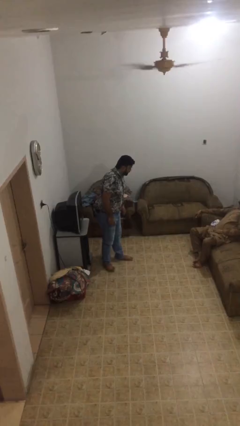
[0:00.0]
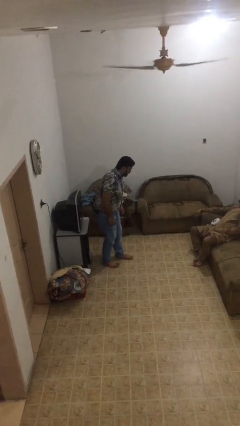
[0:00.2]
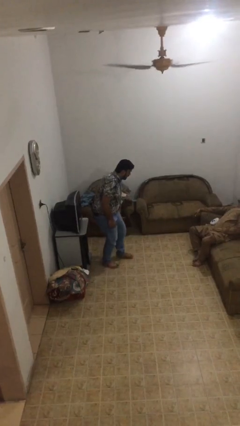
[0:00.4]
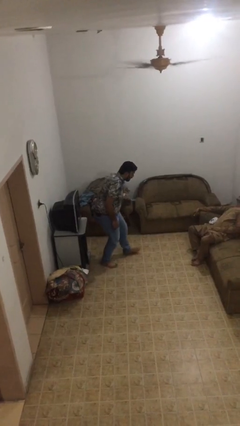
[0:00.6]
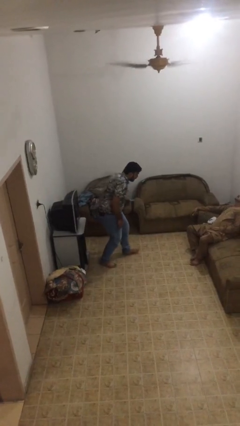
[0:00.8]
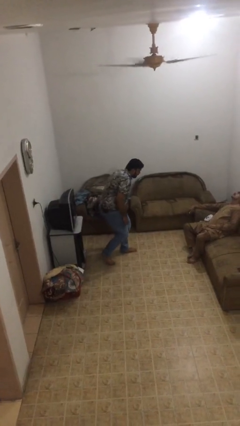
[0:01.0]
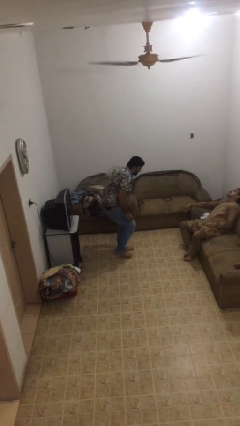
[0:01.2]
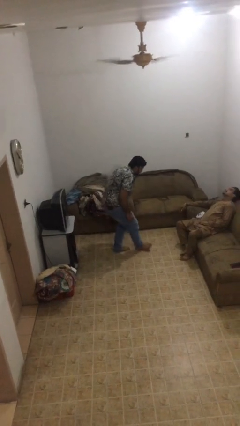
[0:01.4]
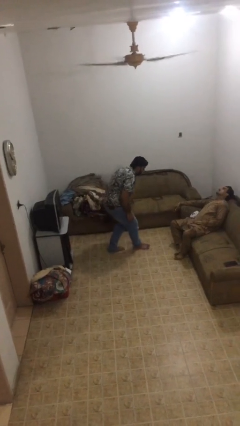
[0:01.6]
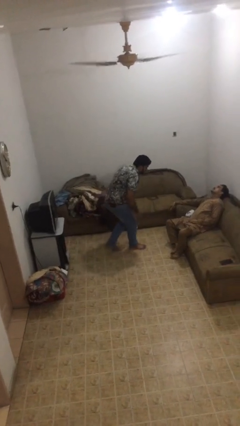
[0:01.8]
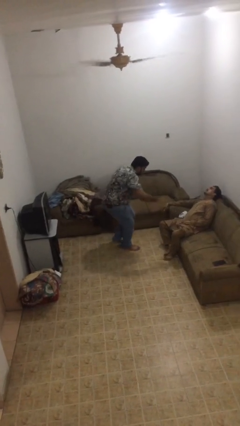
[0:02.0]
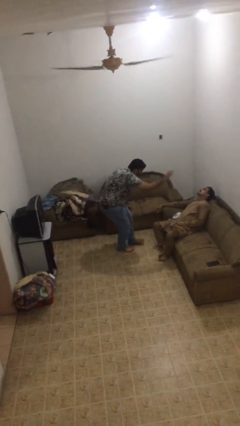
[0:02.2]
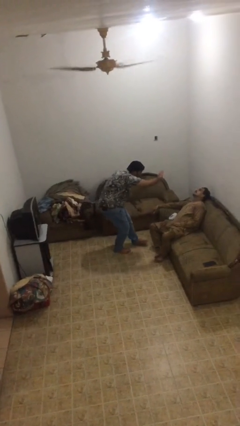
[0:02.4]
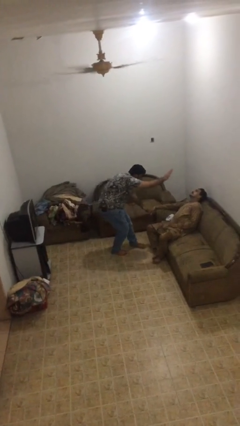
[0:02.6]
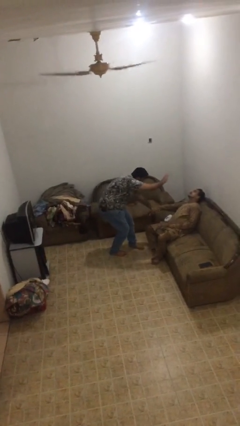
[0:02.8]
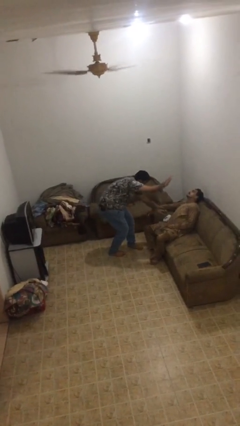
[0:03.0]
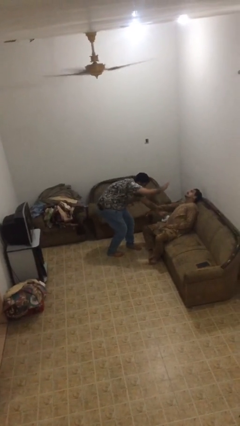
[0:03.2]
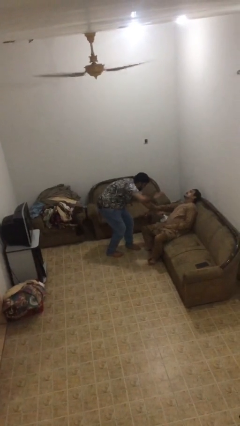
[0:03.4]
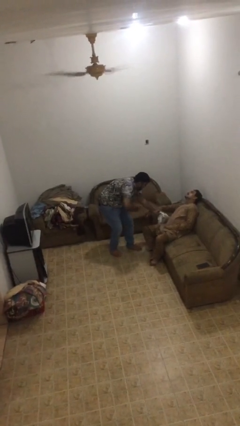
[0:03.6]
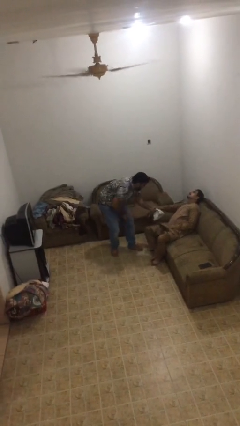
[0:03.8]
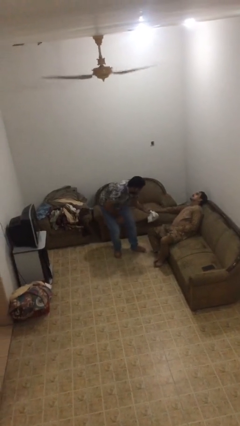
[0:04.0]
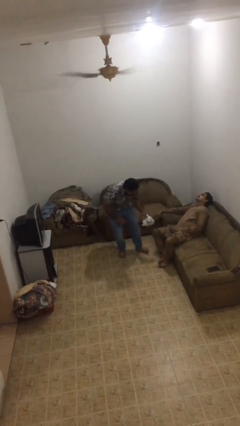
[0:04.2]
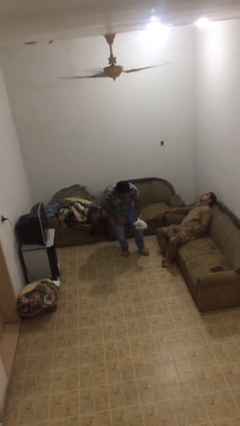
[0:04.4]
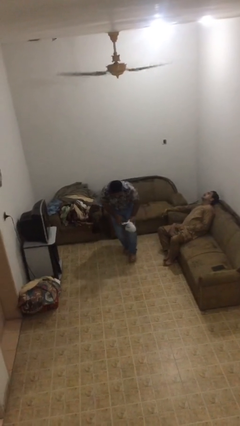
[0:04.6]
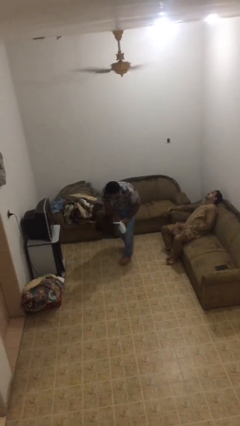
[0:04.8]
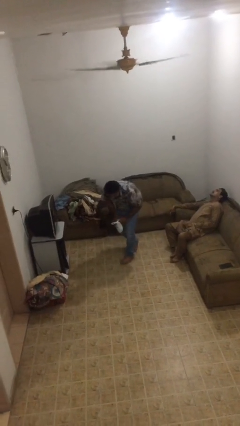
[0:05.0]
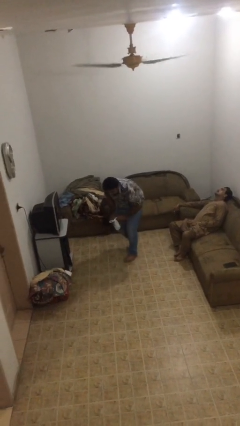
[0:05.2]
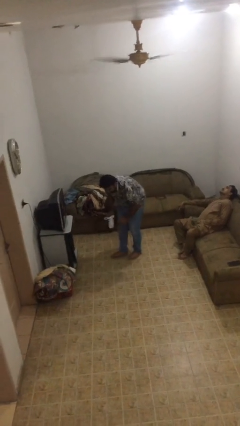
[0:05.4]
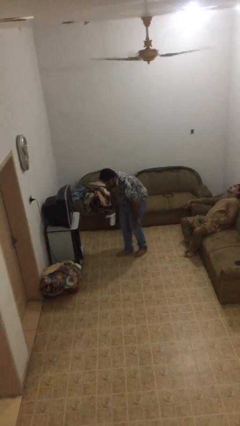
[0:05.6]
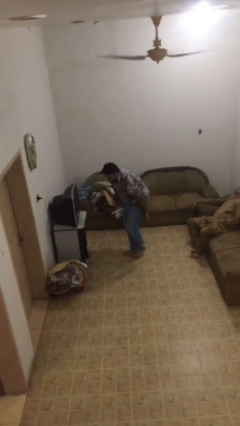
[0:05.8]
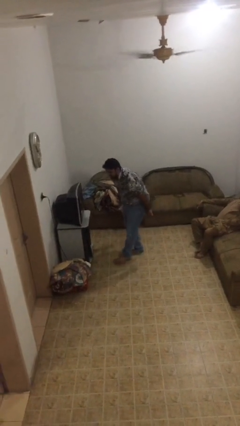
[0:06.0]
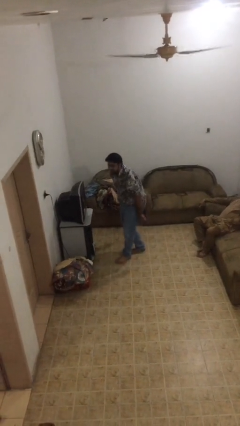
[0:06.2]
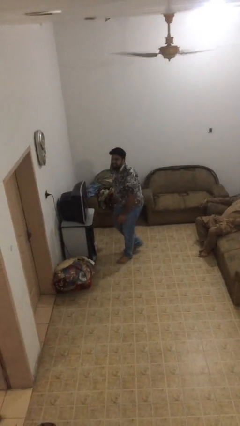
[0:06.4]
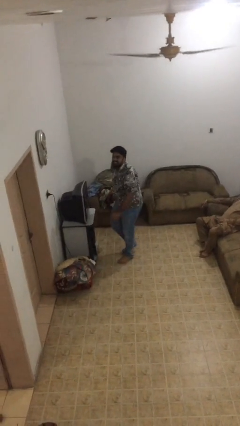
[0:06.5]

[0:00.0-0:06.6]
person steals object from person

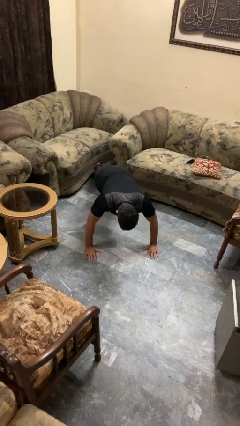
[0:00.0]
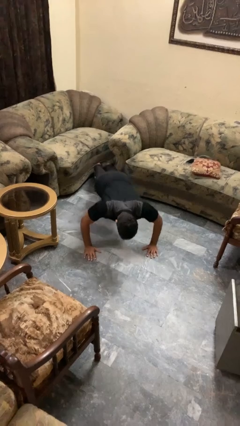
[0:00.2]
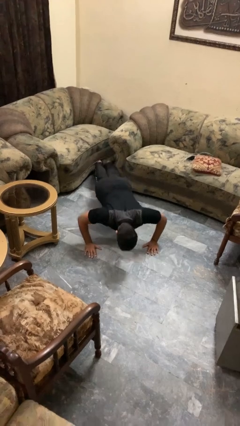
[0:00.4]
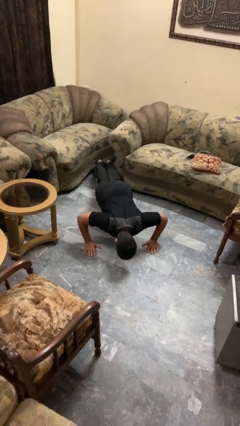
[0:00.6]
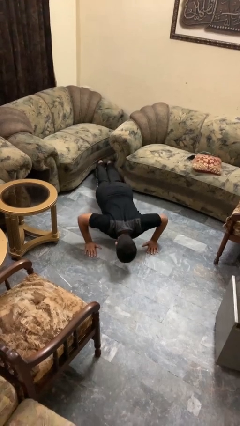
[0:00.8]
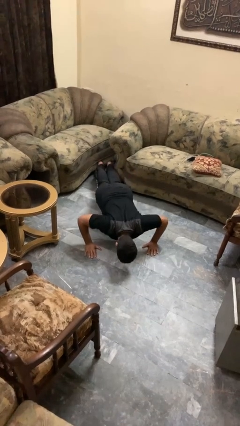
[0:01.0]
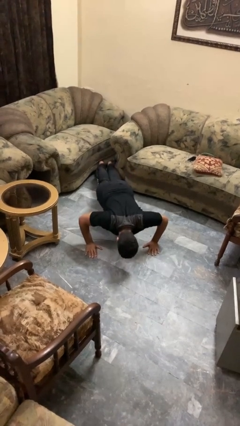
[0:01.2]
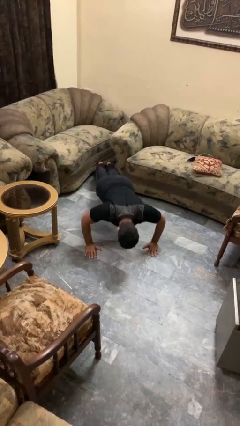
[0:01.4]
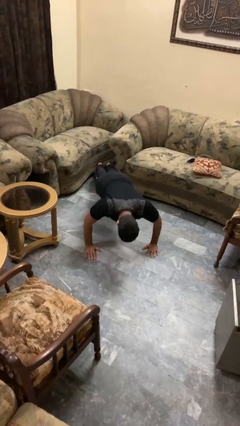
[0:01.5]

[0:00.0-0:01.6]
person exercises with pushup

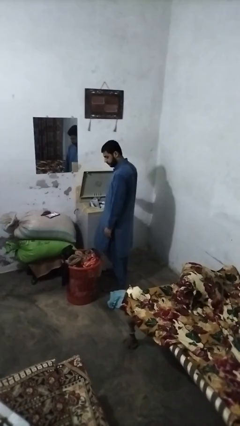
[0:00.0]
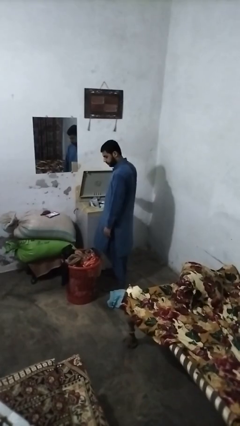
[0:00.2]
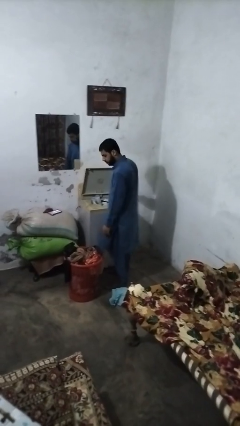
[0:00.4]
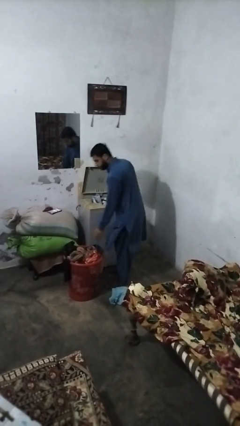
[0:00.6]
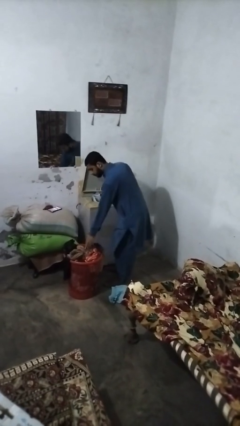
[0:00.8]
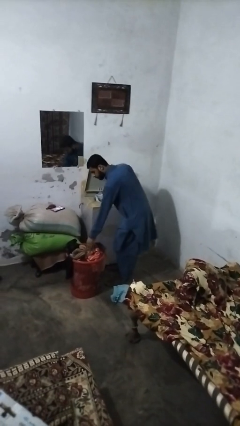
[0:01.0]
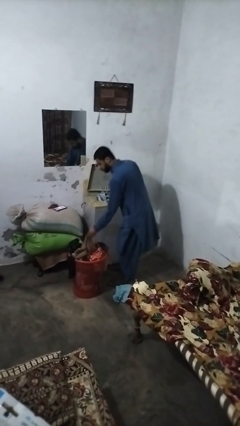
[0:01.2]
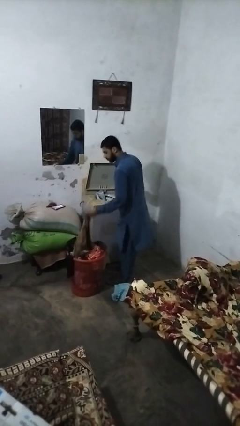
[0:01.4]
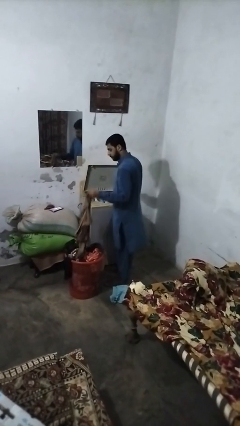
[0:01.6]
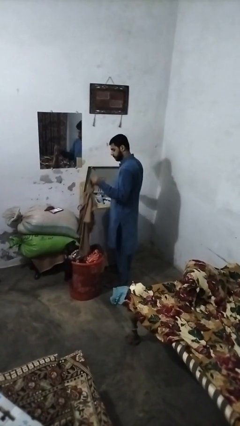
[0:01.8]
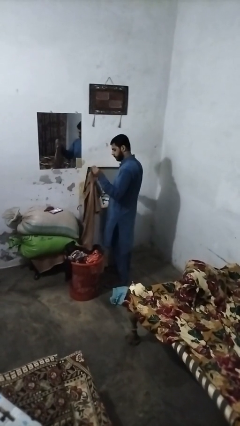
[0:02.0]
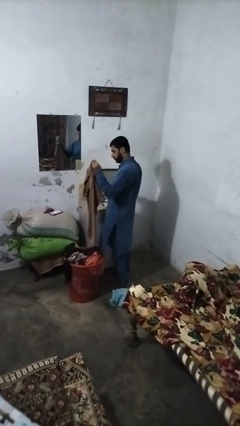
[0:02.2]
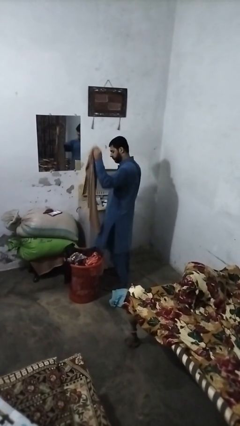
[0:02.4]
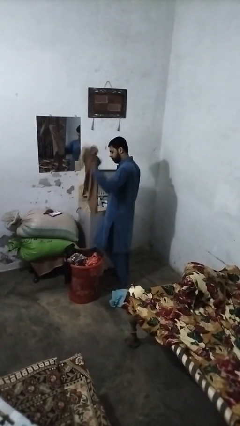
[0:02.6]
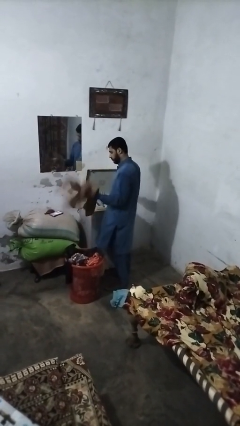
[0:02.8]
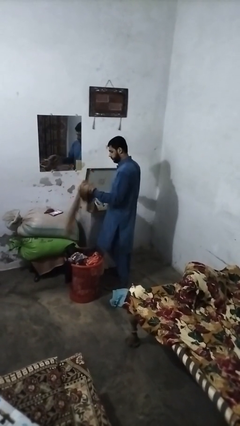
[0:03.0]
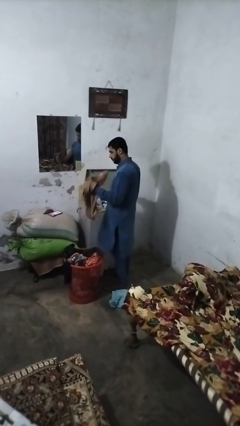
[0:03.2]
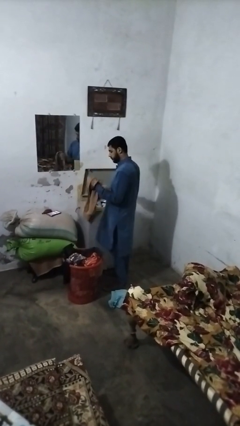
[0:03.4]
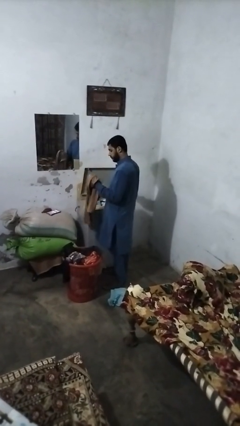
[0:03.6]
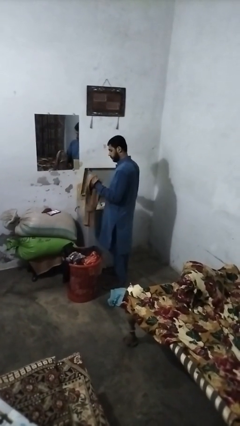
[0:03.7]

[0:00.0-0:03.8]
person unloads clotheswasher

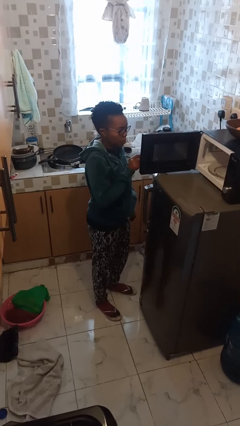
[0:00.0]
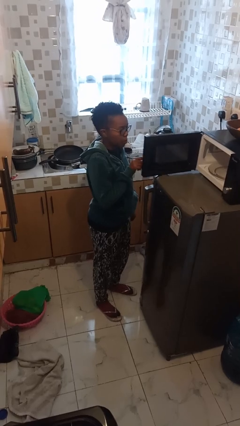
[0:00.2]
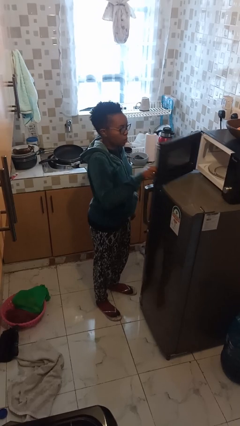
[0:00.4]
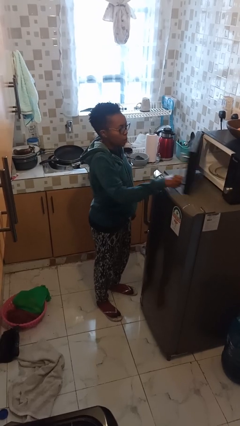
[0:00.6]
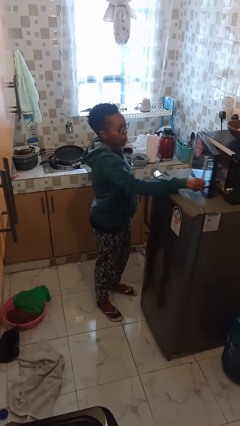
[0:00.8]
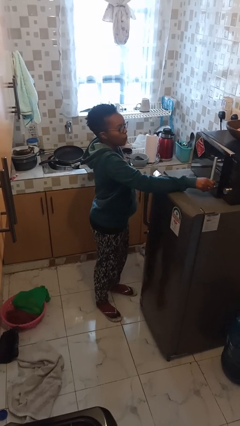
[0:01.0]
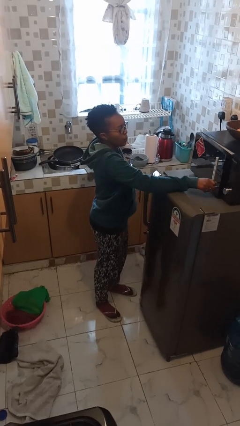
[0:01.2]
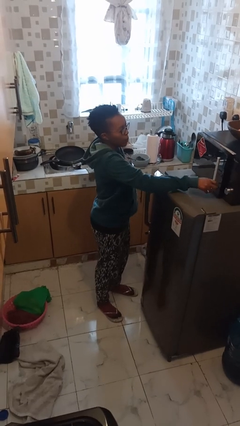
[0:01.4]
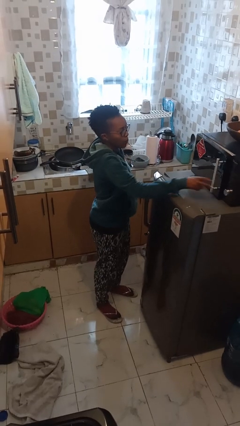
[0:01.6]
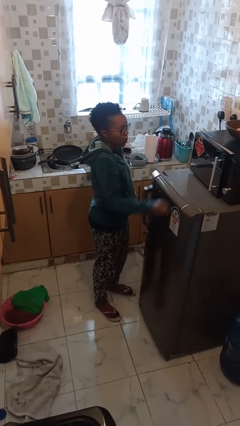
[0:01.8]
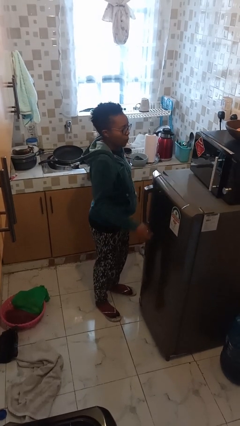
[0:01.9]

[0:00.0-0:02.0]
person closes microwave

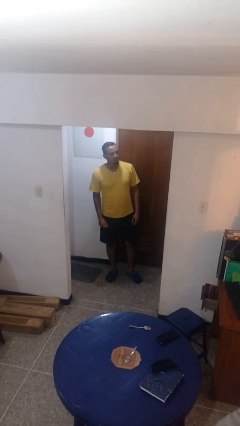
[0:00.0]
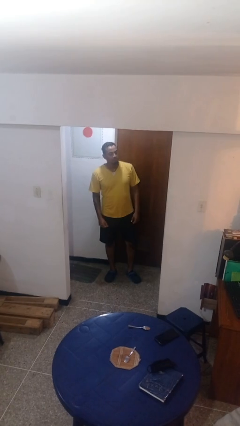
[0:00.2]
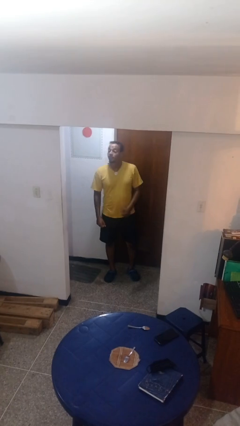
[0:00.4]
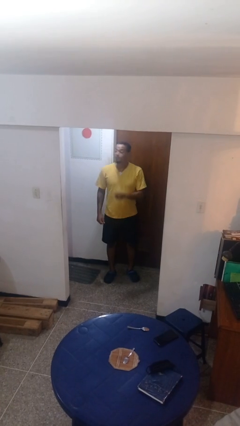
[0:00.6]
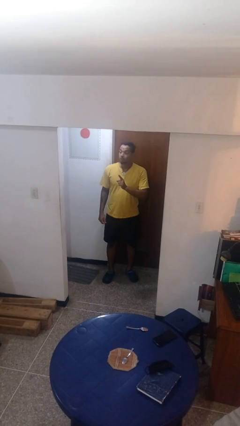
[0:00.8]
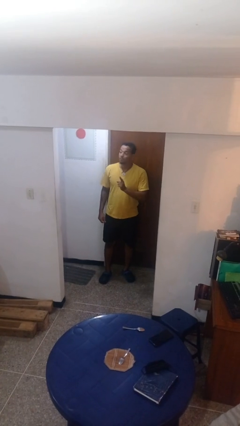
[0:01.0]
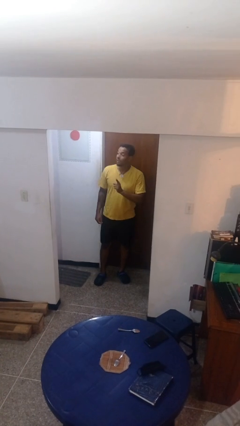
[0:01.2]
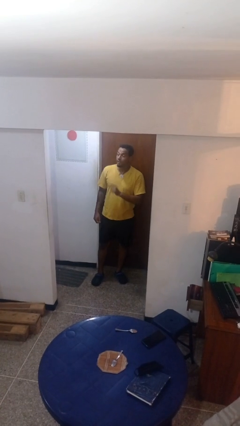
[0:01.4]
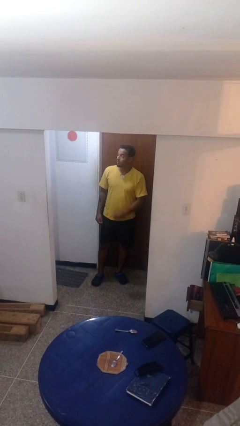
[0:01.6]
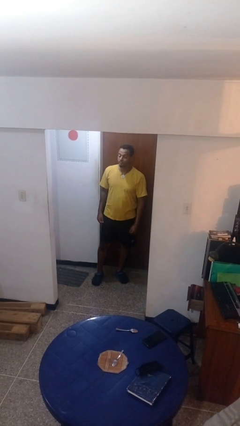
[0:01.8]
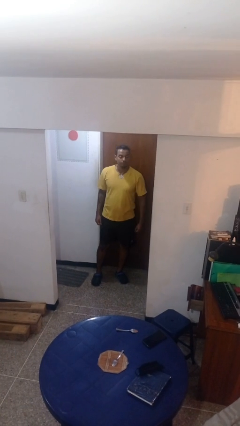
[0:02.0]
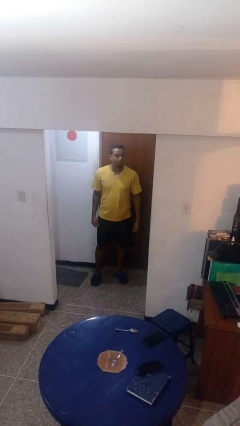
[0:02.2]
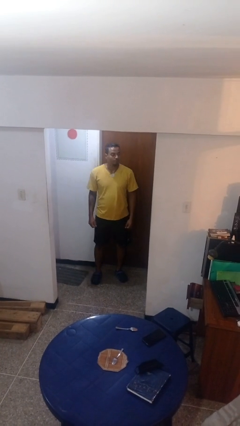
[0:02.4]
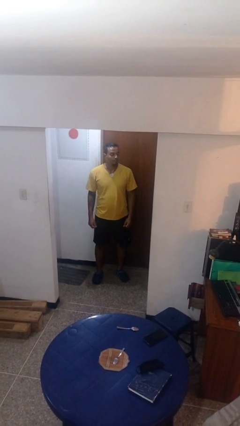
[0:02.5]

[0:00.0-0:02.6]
person shakes head

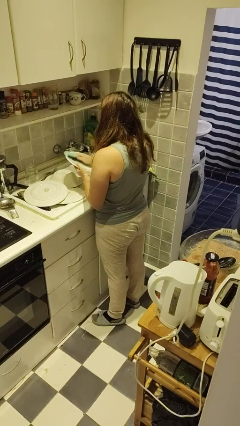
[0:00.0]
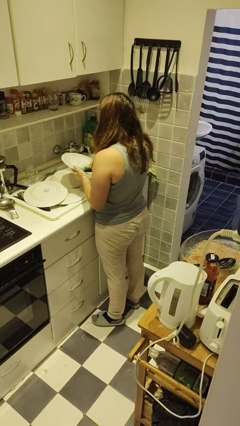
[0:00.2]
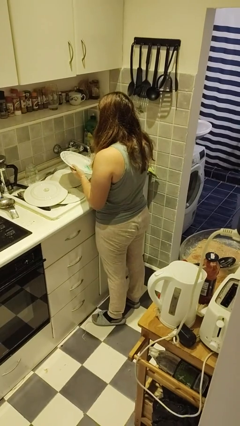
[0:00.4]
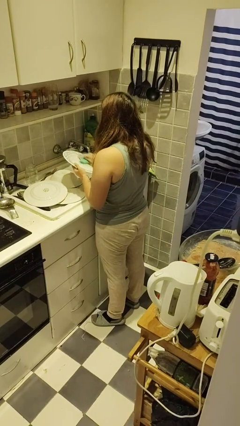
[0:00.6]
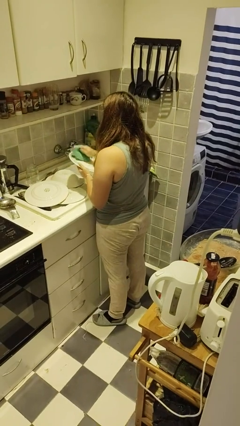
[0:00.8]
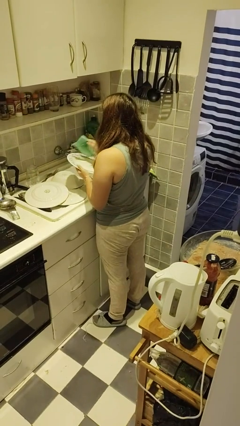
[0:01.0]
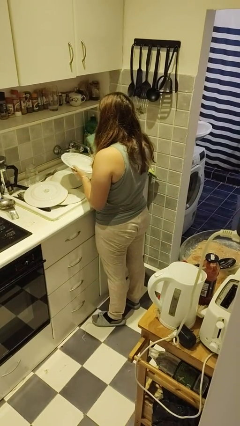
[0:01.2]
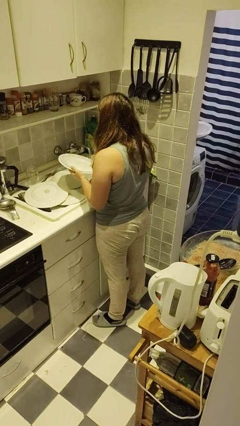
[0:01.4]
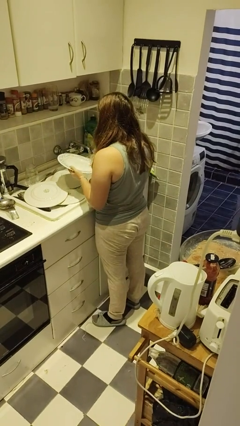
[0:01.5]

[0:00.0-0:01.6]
person dries dish
